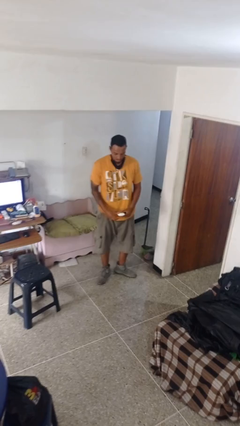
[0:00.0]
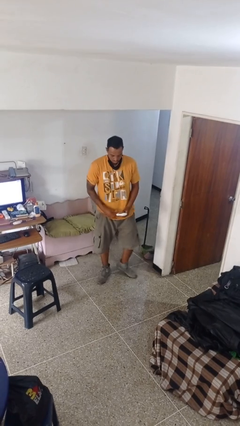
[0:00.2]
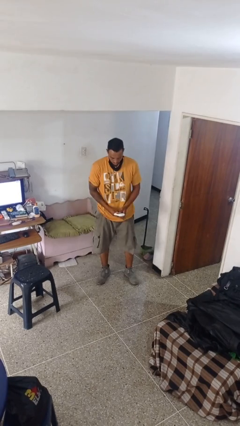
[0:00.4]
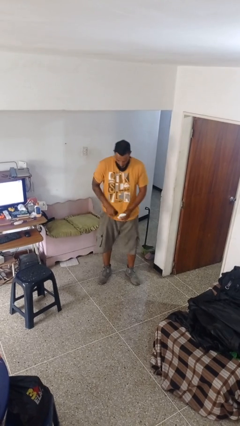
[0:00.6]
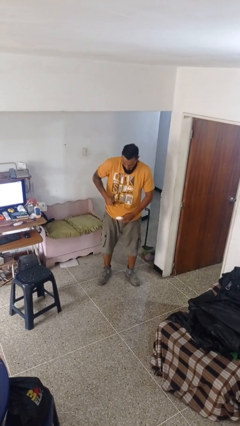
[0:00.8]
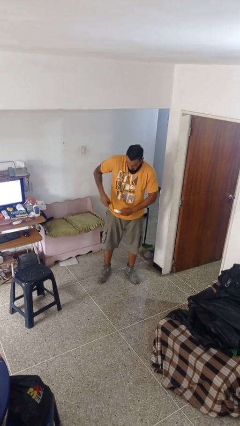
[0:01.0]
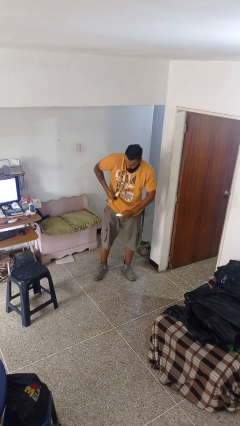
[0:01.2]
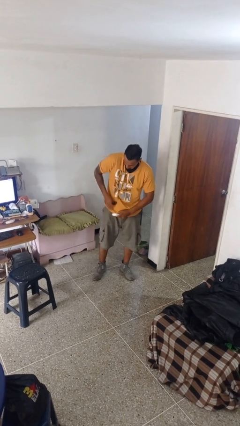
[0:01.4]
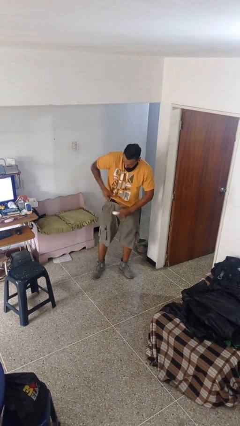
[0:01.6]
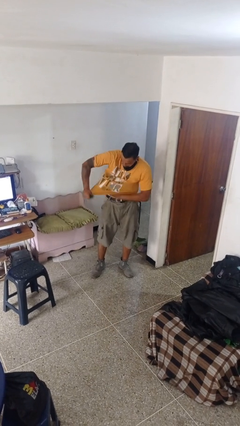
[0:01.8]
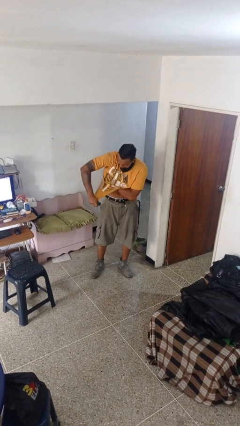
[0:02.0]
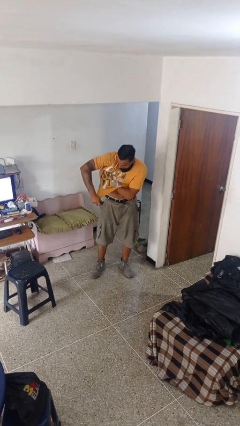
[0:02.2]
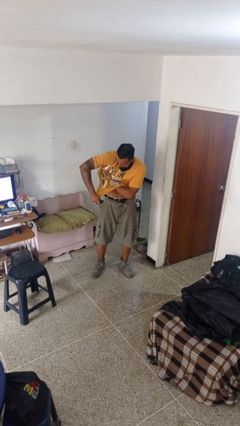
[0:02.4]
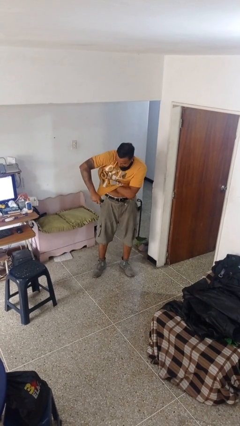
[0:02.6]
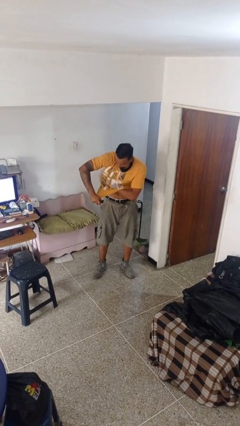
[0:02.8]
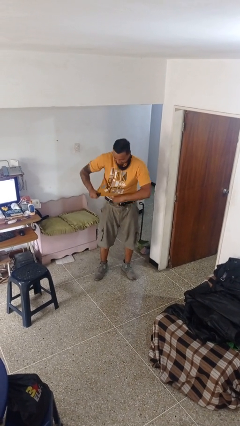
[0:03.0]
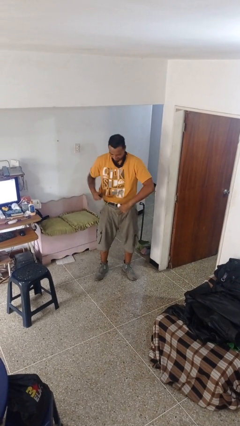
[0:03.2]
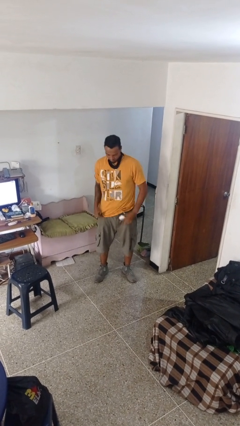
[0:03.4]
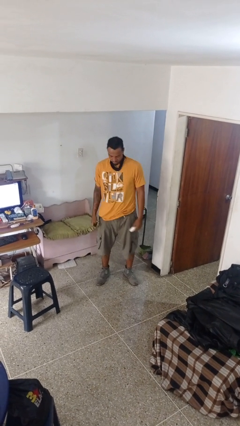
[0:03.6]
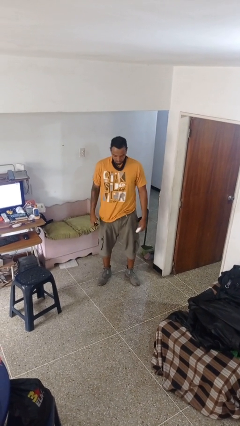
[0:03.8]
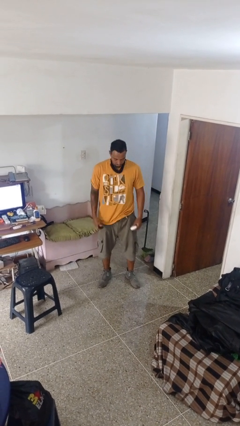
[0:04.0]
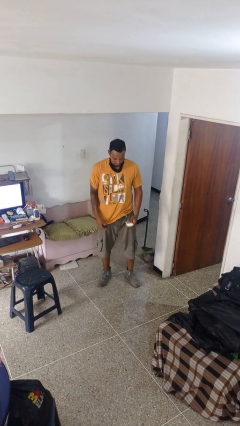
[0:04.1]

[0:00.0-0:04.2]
person applies deodorant

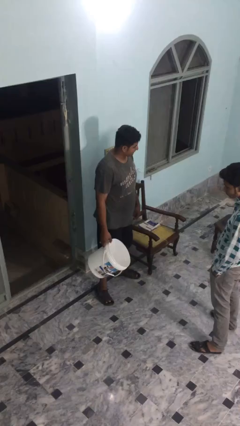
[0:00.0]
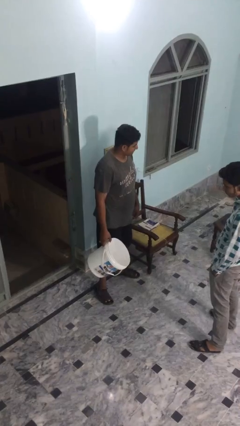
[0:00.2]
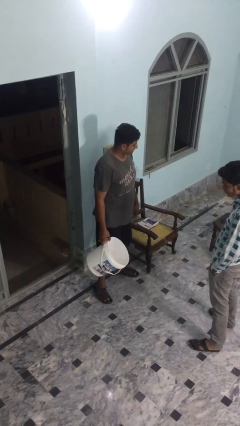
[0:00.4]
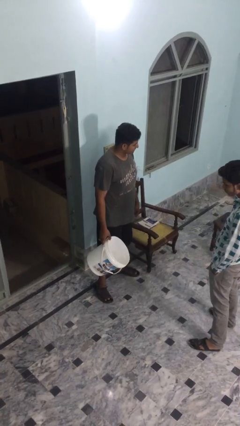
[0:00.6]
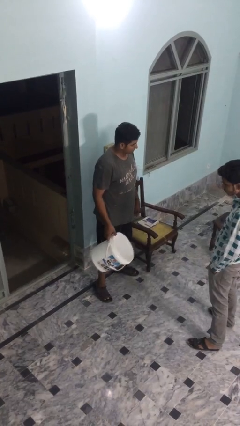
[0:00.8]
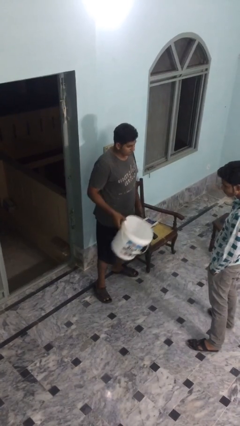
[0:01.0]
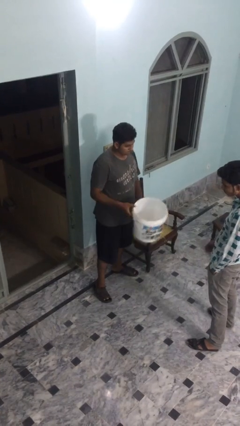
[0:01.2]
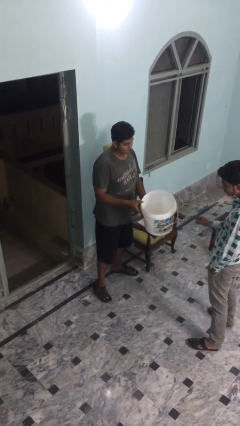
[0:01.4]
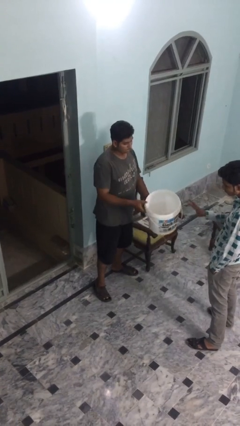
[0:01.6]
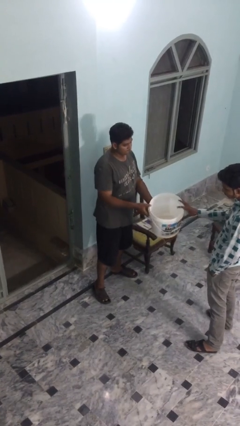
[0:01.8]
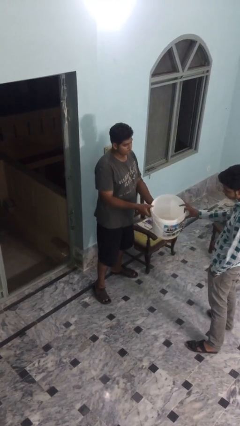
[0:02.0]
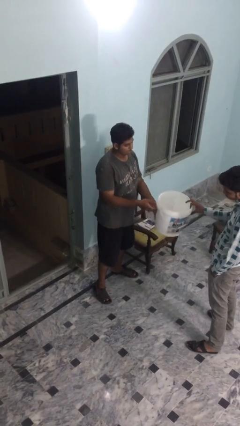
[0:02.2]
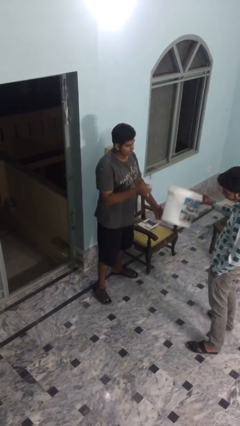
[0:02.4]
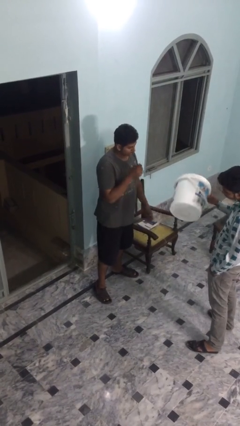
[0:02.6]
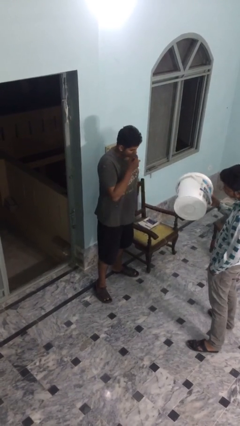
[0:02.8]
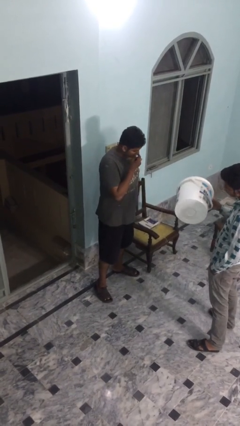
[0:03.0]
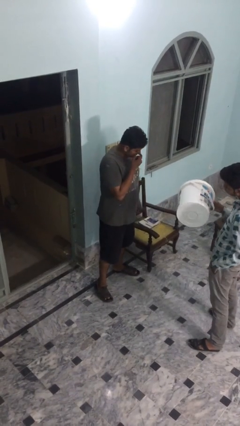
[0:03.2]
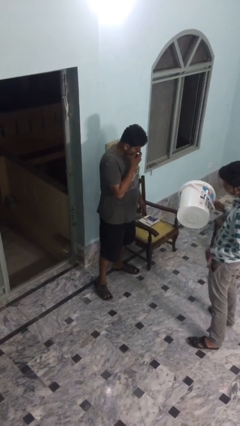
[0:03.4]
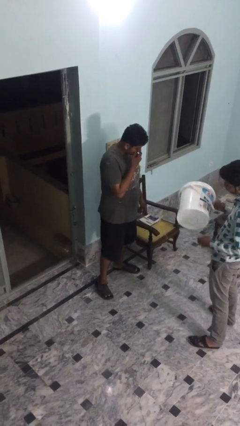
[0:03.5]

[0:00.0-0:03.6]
person transfers object to person

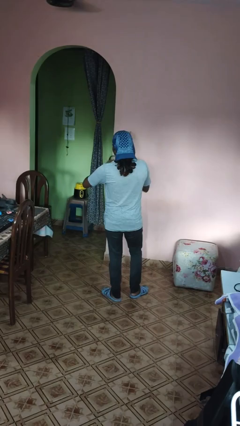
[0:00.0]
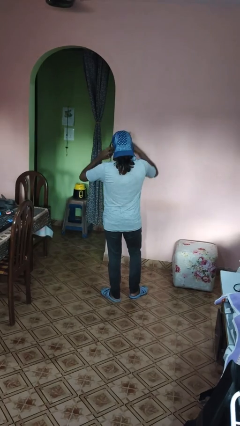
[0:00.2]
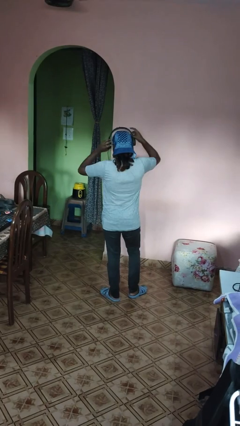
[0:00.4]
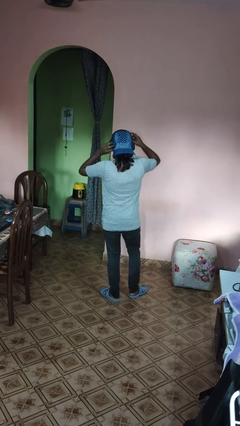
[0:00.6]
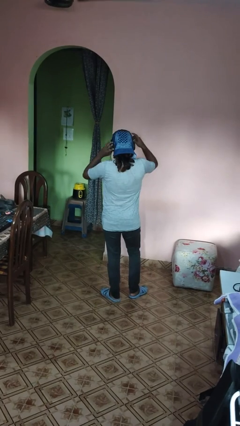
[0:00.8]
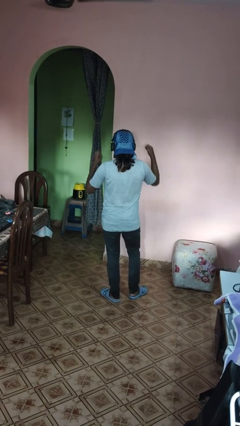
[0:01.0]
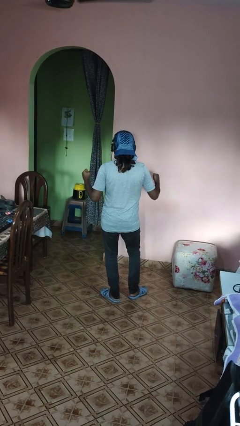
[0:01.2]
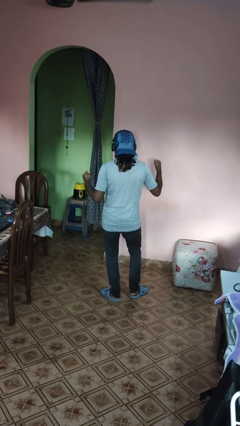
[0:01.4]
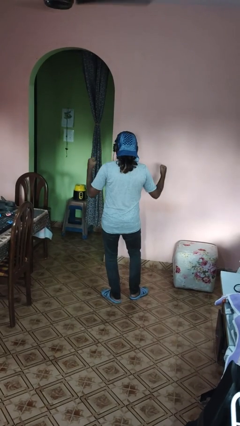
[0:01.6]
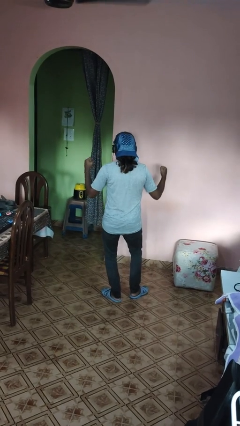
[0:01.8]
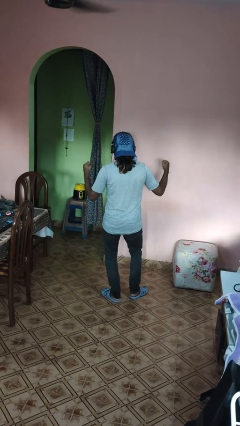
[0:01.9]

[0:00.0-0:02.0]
person puts on headphones

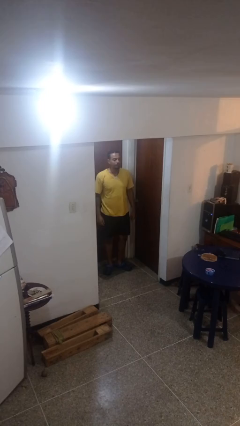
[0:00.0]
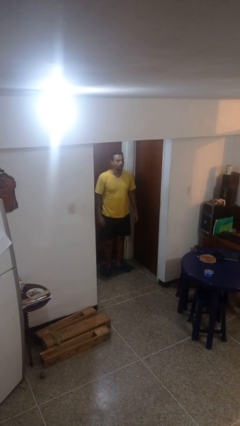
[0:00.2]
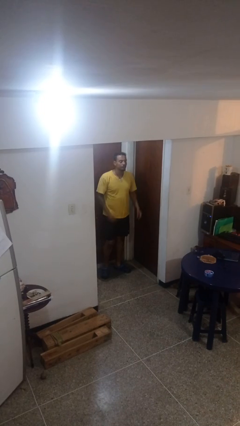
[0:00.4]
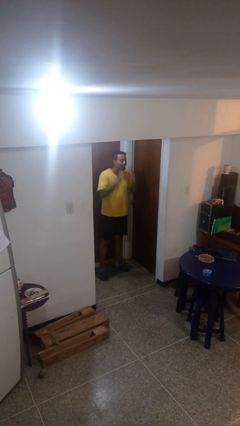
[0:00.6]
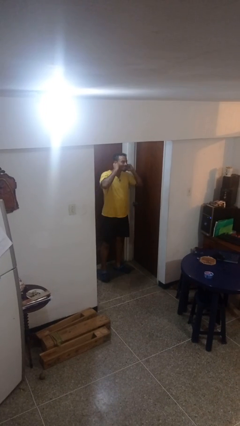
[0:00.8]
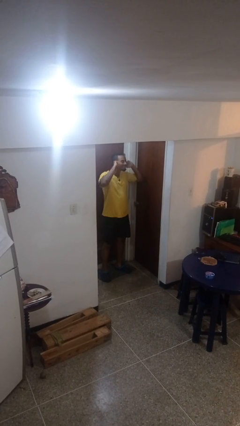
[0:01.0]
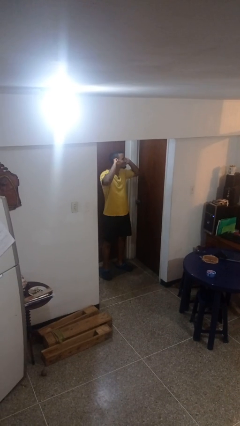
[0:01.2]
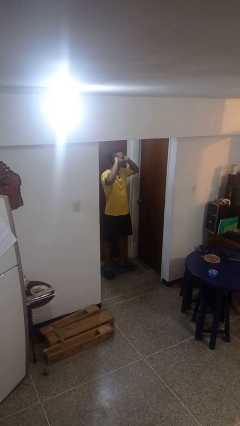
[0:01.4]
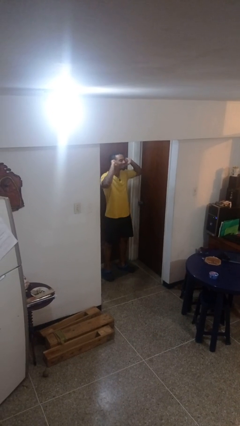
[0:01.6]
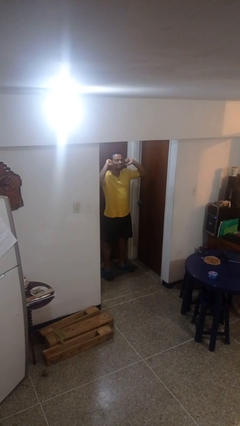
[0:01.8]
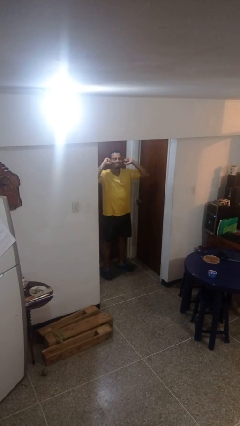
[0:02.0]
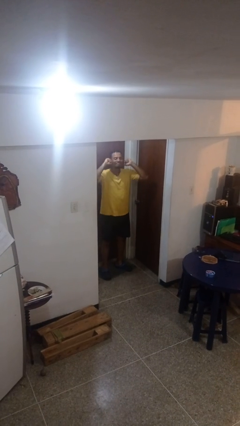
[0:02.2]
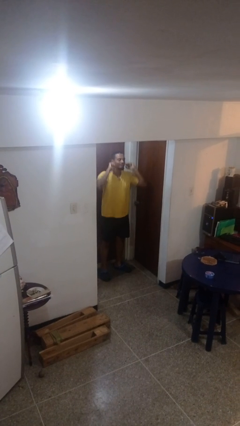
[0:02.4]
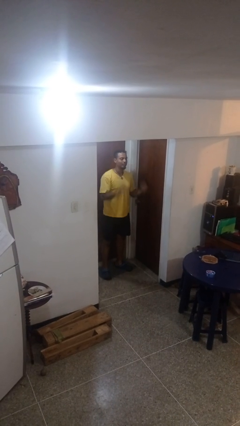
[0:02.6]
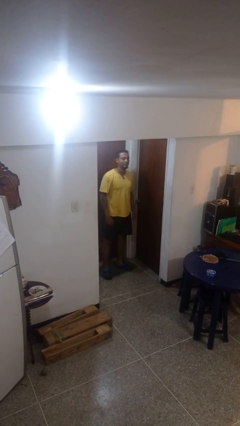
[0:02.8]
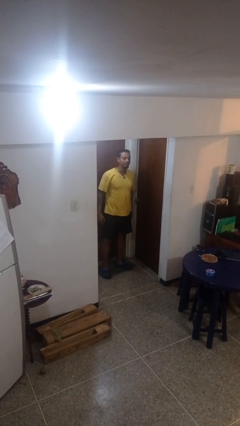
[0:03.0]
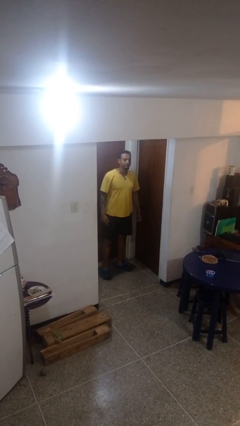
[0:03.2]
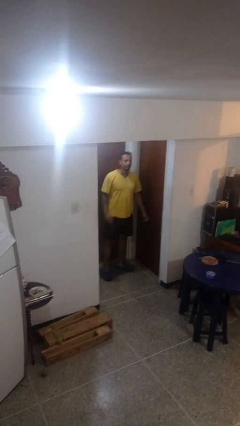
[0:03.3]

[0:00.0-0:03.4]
person puts fingers in ear

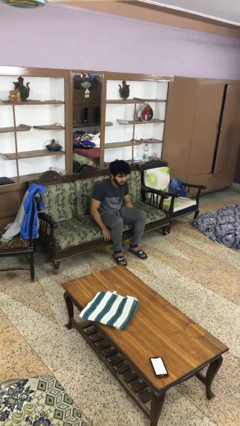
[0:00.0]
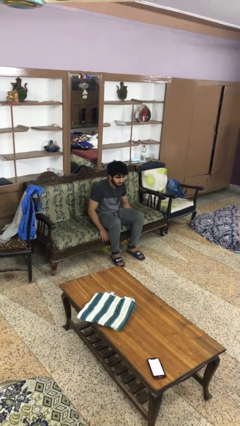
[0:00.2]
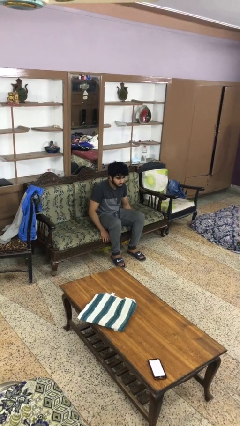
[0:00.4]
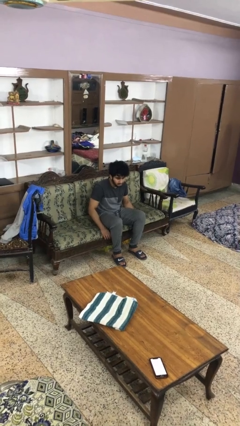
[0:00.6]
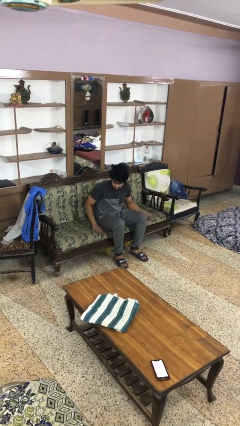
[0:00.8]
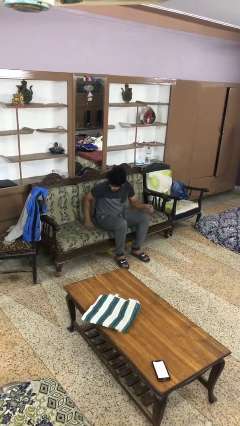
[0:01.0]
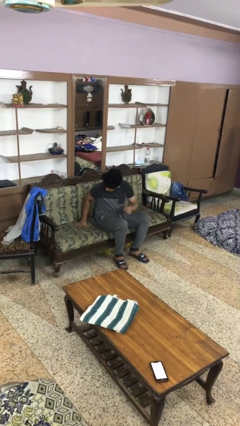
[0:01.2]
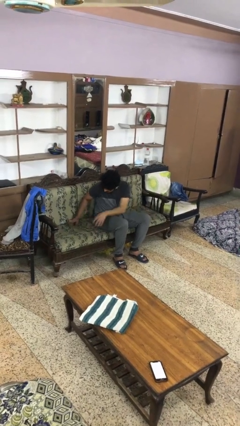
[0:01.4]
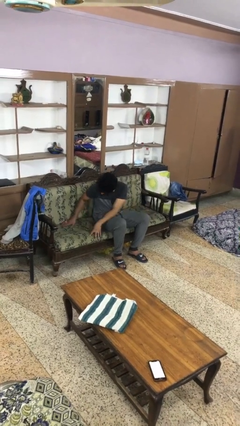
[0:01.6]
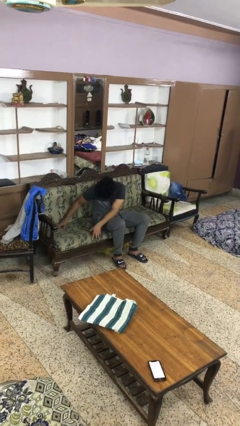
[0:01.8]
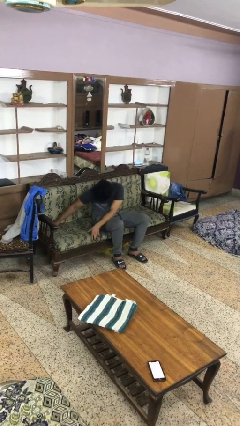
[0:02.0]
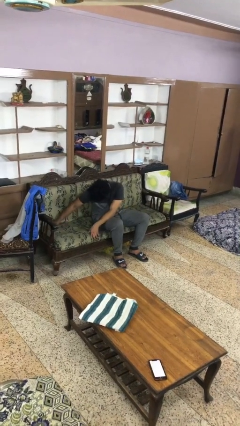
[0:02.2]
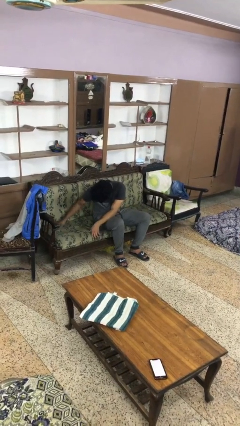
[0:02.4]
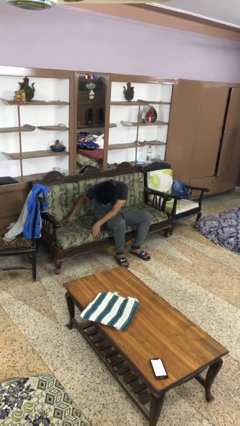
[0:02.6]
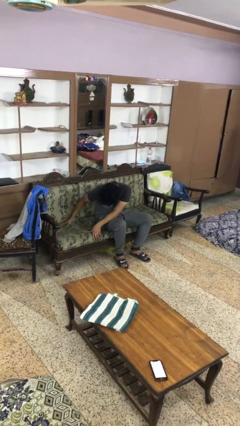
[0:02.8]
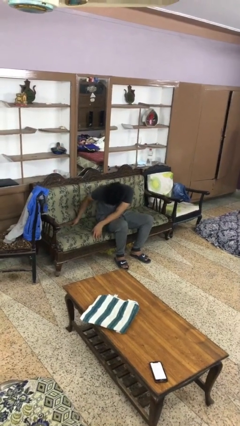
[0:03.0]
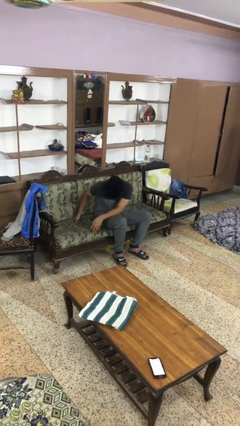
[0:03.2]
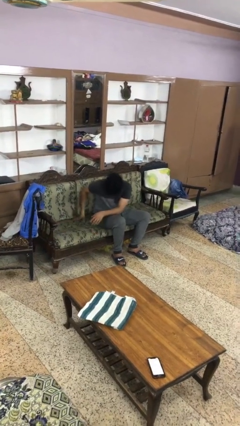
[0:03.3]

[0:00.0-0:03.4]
person searches in couch

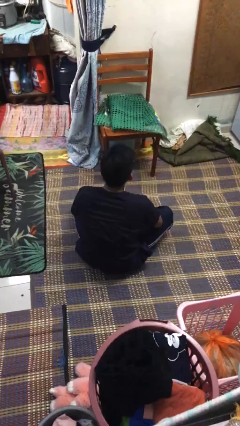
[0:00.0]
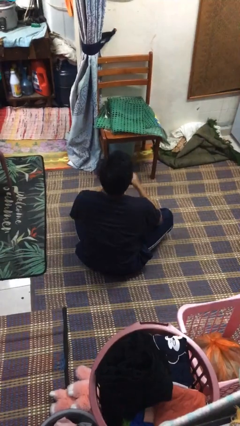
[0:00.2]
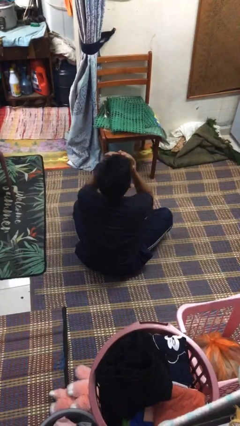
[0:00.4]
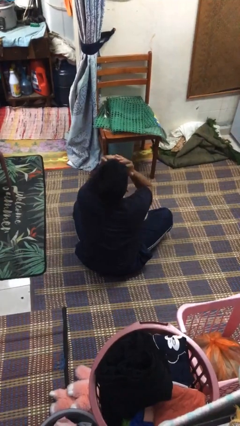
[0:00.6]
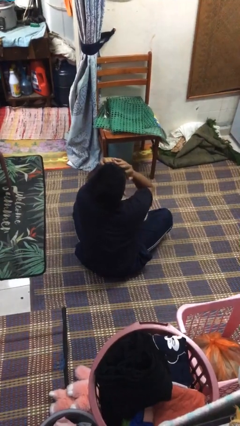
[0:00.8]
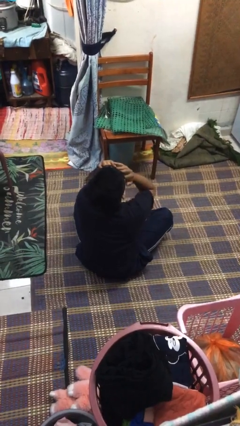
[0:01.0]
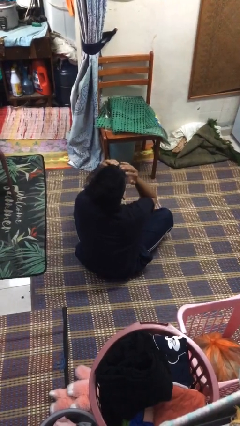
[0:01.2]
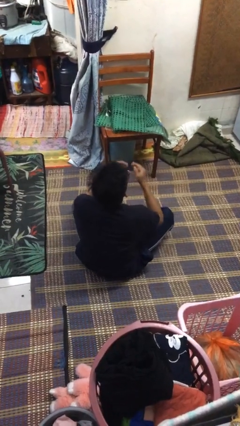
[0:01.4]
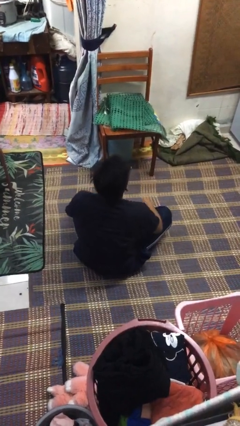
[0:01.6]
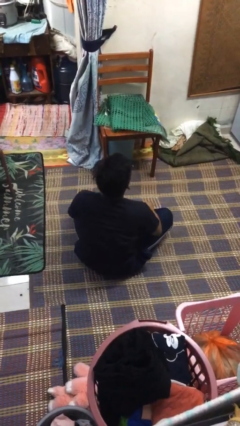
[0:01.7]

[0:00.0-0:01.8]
person covers face with hands
